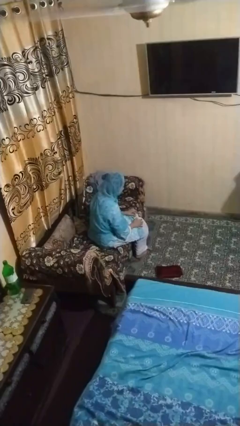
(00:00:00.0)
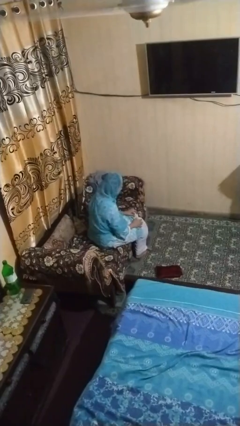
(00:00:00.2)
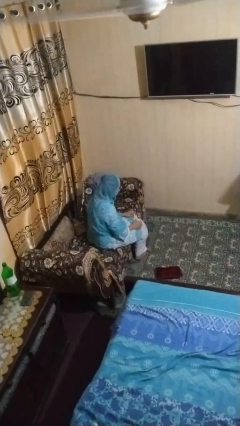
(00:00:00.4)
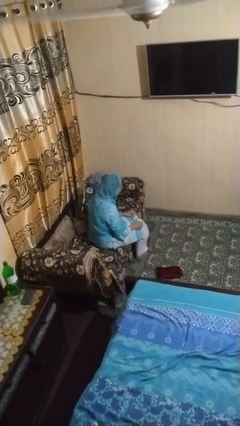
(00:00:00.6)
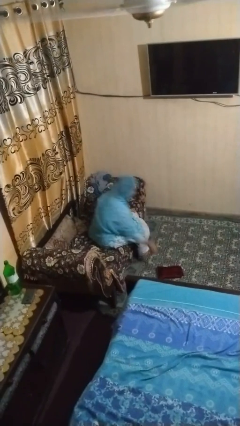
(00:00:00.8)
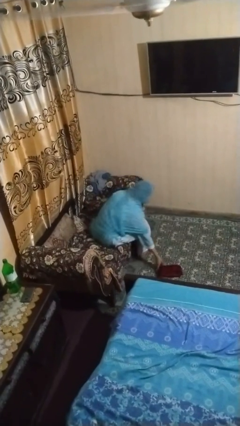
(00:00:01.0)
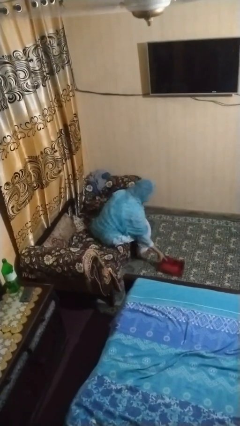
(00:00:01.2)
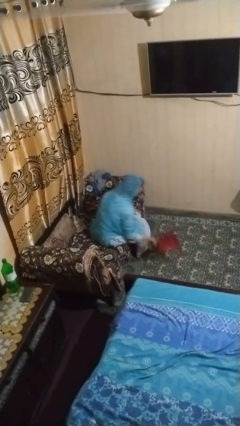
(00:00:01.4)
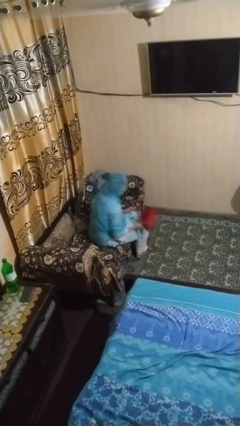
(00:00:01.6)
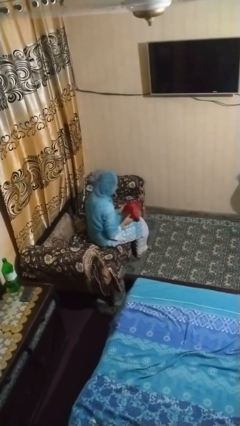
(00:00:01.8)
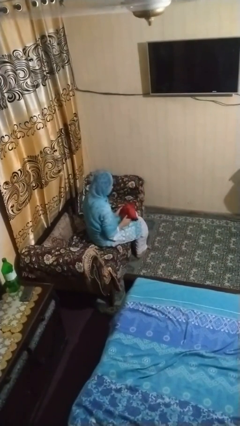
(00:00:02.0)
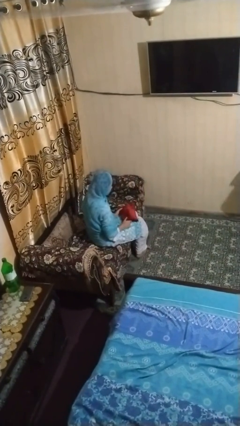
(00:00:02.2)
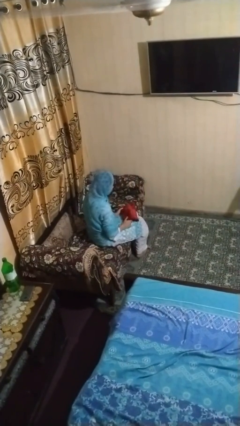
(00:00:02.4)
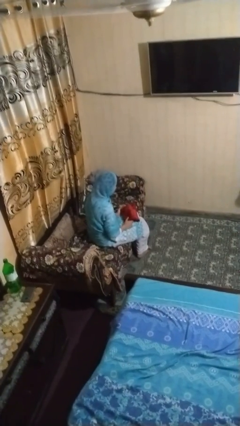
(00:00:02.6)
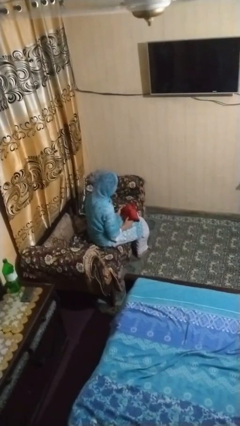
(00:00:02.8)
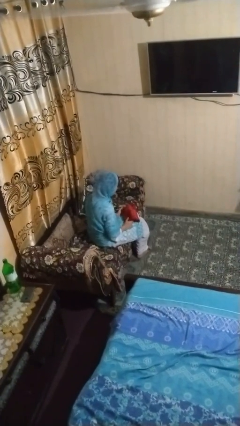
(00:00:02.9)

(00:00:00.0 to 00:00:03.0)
person picks up object from floor

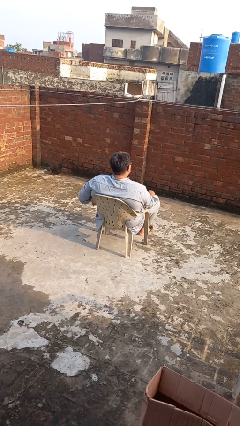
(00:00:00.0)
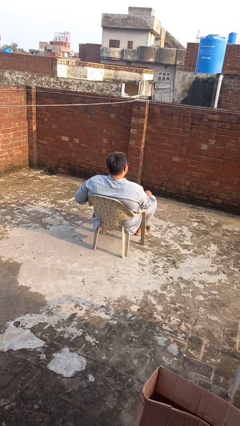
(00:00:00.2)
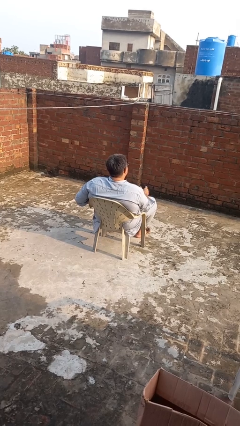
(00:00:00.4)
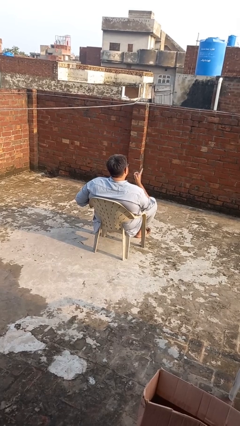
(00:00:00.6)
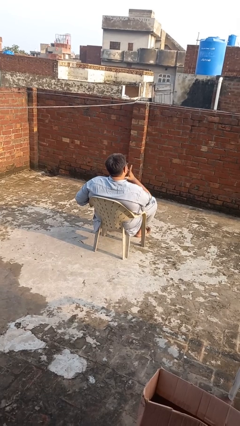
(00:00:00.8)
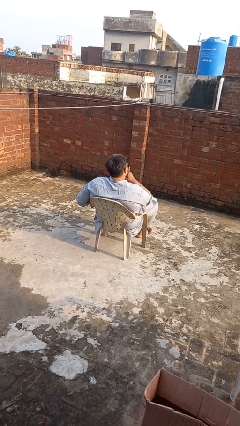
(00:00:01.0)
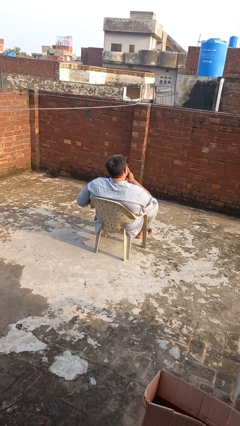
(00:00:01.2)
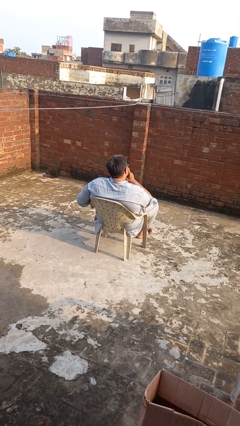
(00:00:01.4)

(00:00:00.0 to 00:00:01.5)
person strokes chin

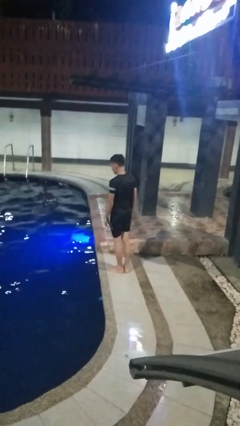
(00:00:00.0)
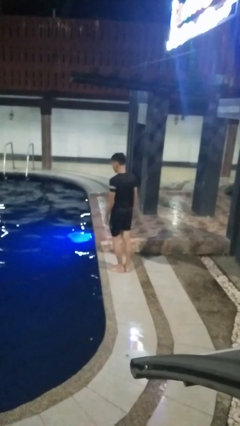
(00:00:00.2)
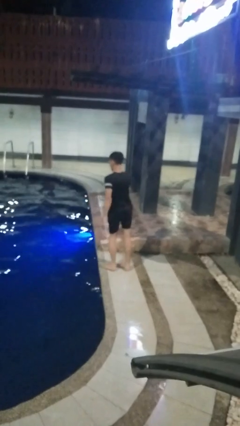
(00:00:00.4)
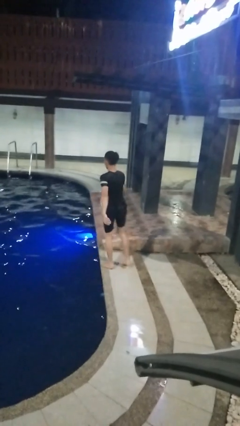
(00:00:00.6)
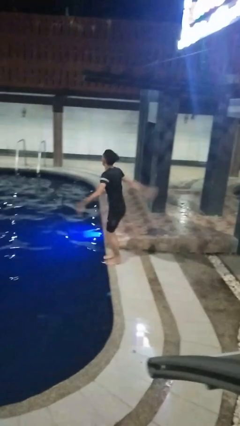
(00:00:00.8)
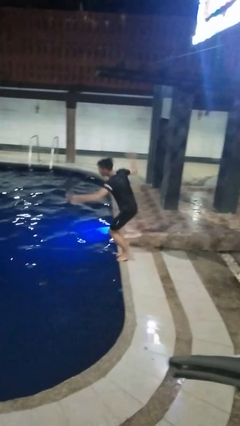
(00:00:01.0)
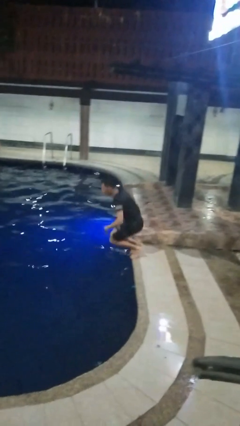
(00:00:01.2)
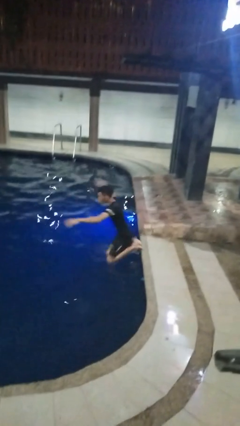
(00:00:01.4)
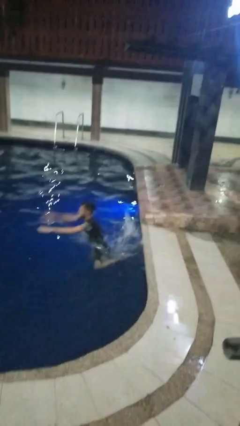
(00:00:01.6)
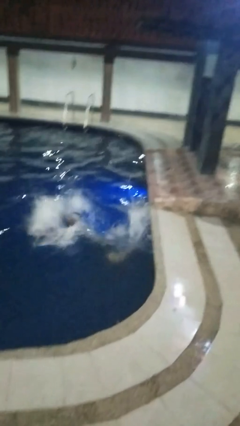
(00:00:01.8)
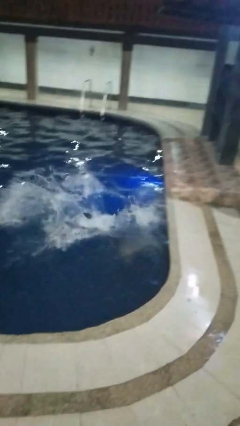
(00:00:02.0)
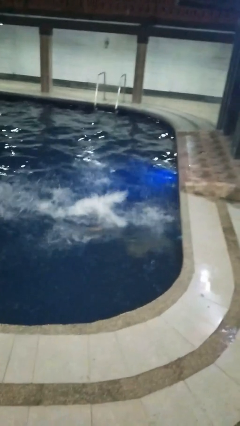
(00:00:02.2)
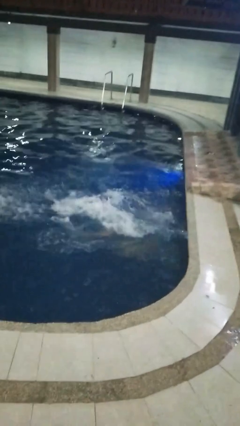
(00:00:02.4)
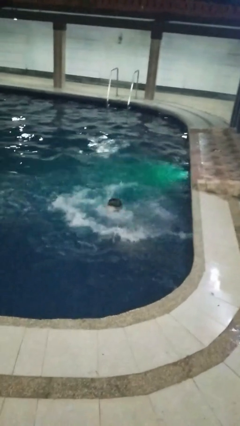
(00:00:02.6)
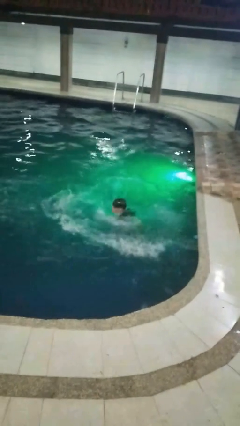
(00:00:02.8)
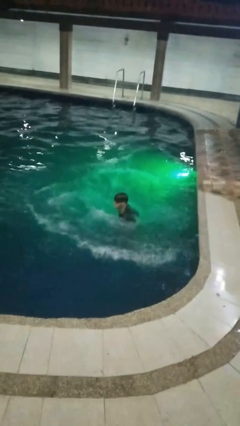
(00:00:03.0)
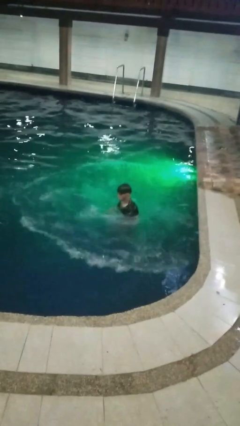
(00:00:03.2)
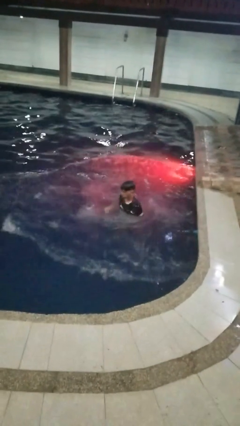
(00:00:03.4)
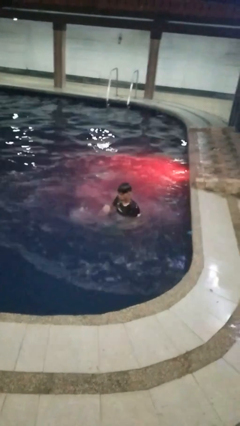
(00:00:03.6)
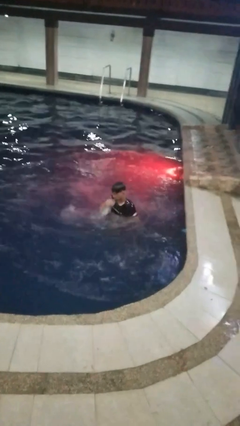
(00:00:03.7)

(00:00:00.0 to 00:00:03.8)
person falls into pool

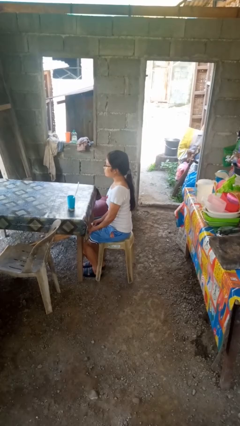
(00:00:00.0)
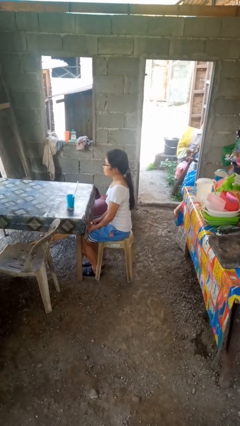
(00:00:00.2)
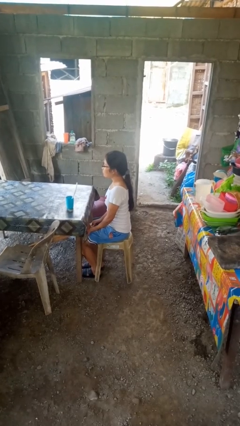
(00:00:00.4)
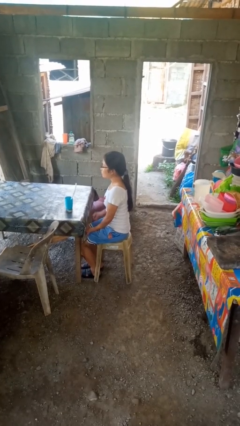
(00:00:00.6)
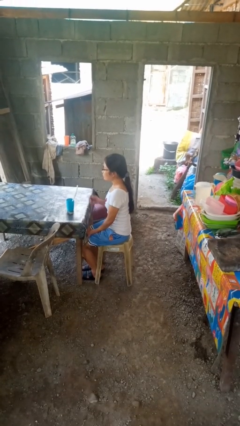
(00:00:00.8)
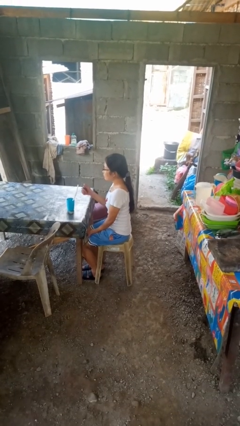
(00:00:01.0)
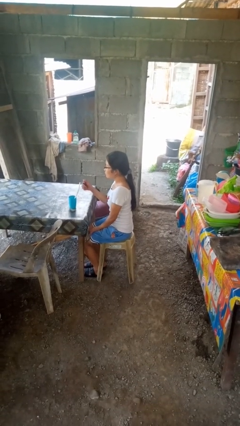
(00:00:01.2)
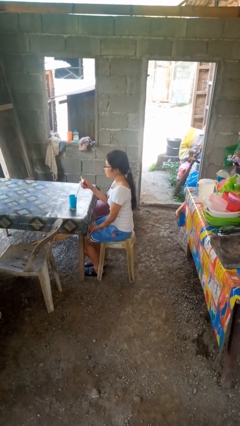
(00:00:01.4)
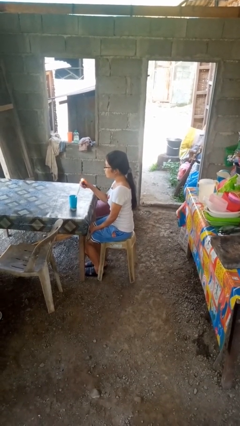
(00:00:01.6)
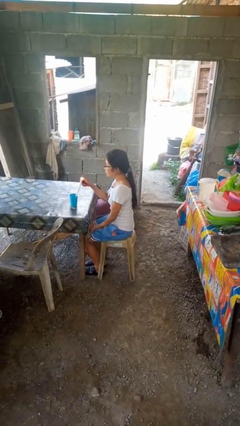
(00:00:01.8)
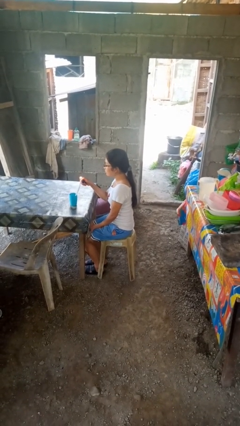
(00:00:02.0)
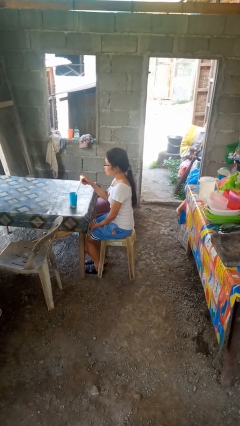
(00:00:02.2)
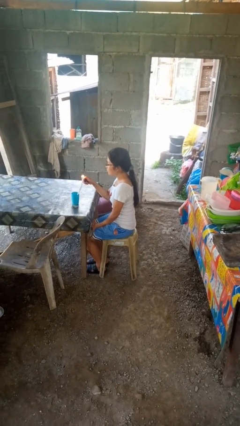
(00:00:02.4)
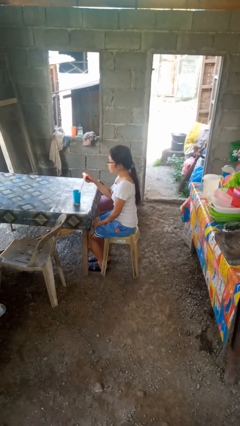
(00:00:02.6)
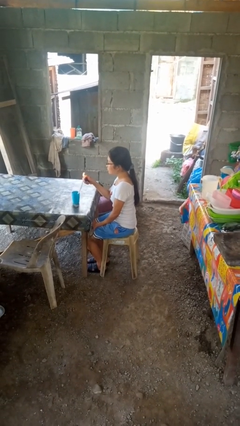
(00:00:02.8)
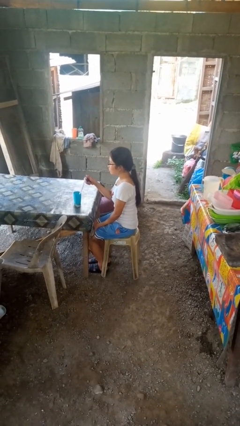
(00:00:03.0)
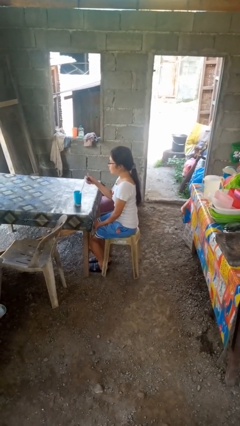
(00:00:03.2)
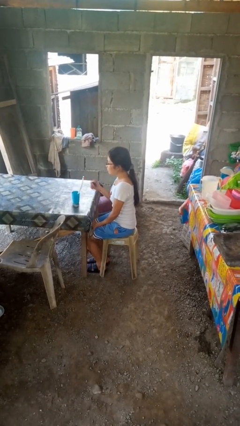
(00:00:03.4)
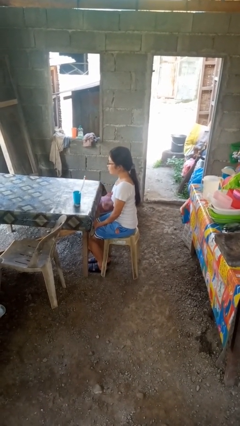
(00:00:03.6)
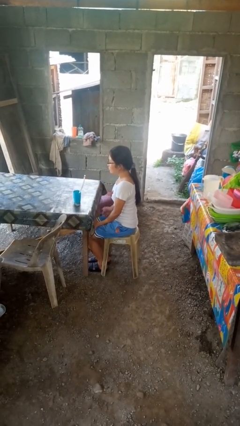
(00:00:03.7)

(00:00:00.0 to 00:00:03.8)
person lights candle

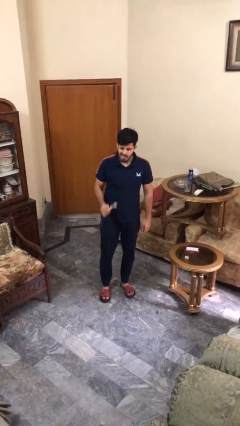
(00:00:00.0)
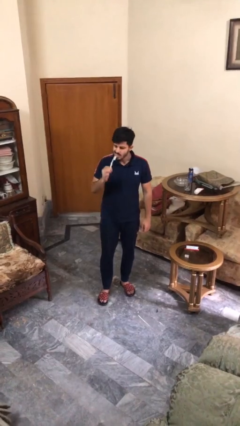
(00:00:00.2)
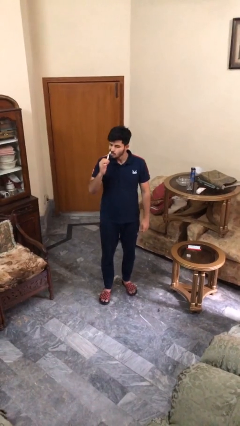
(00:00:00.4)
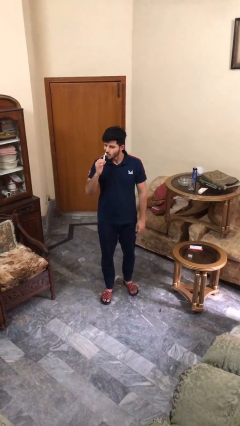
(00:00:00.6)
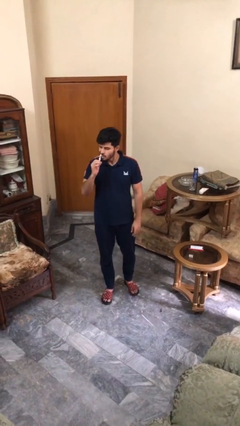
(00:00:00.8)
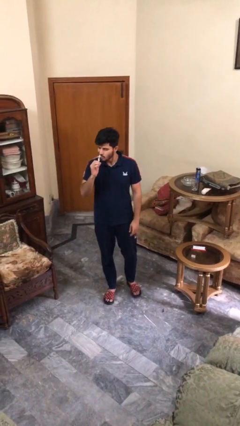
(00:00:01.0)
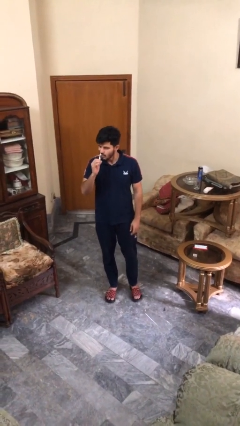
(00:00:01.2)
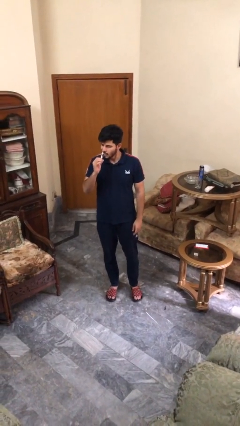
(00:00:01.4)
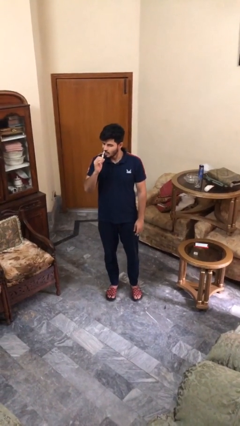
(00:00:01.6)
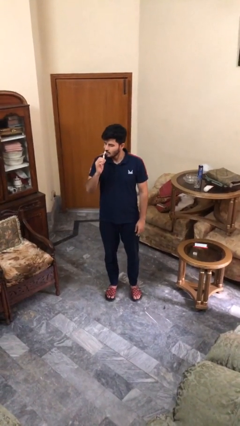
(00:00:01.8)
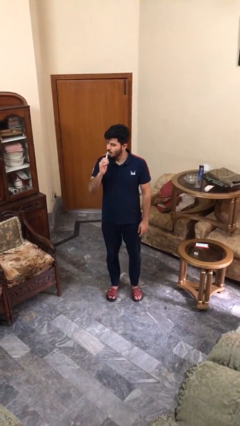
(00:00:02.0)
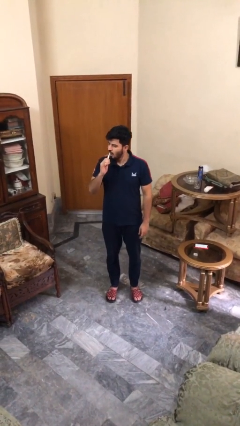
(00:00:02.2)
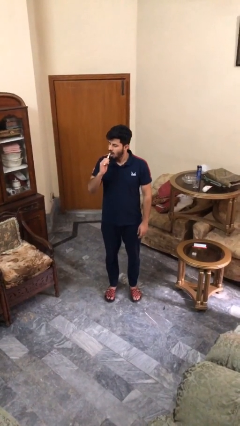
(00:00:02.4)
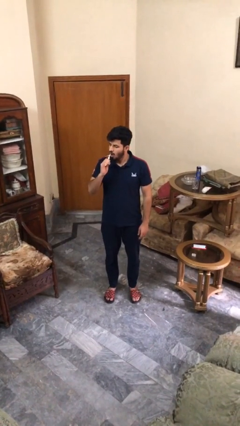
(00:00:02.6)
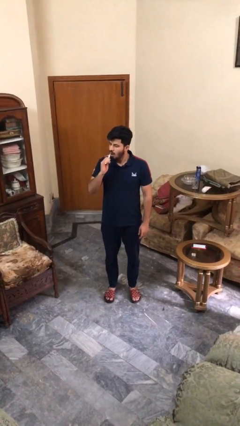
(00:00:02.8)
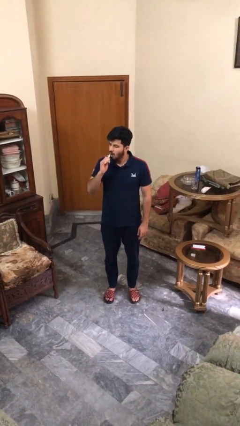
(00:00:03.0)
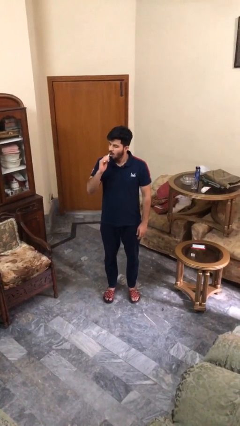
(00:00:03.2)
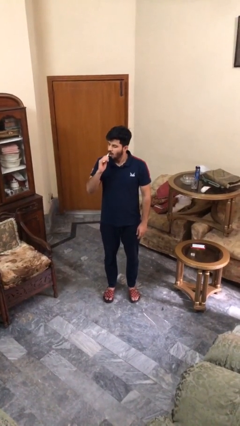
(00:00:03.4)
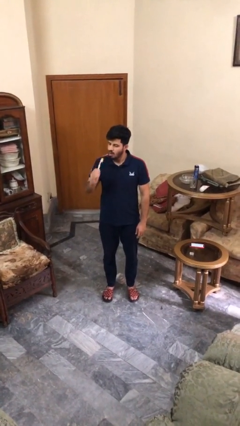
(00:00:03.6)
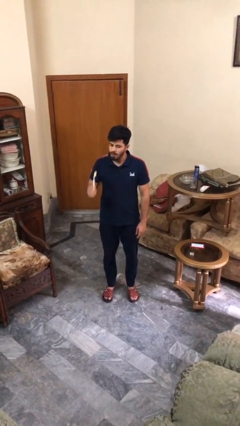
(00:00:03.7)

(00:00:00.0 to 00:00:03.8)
person brushes teeth

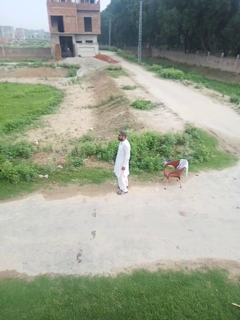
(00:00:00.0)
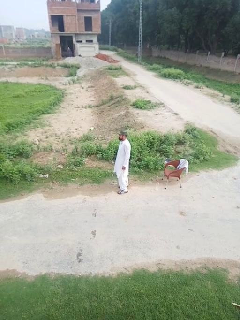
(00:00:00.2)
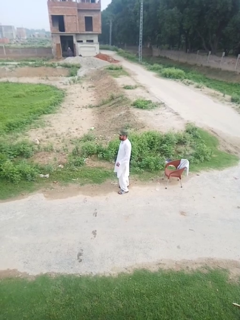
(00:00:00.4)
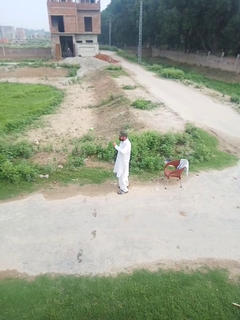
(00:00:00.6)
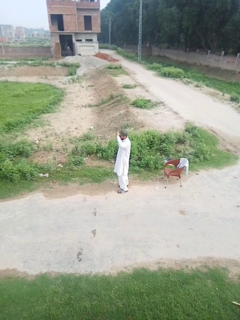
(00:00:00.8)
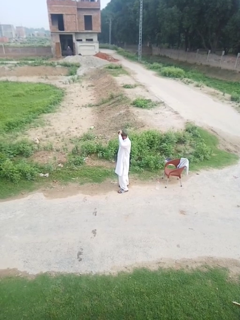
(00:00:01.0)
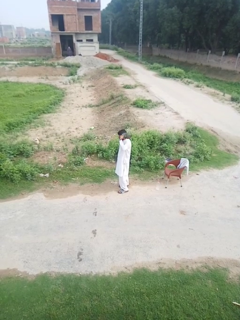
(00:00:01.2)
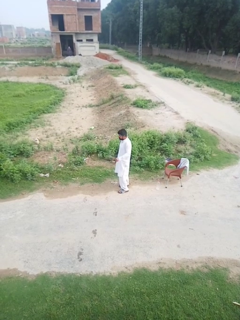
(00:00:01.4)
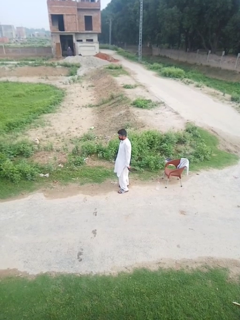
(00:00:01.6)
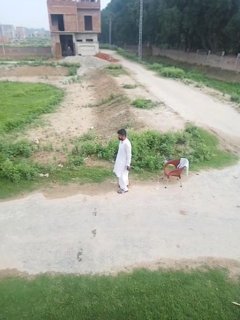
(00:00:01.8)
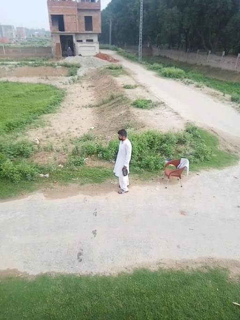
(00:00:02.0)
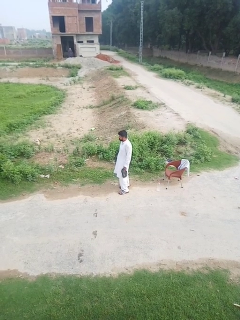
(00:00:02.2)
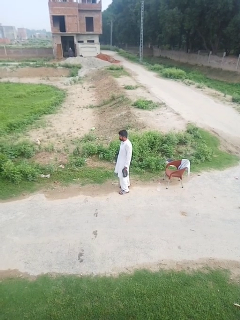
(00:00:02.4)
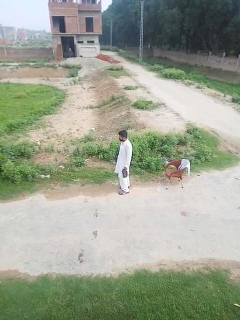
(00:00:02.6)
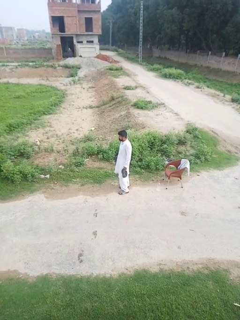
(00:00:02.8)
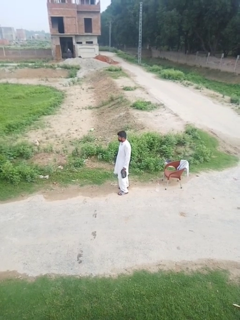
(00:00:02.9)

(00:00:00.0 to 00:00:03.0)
person takes off hat
